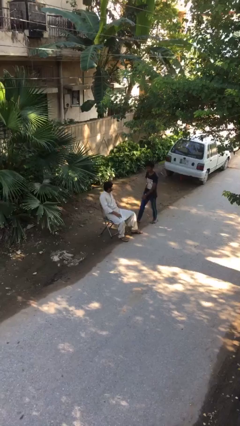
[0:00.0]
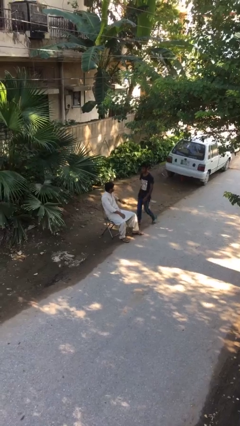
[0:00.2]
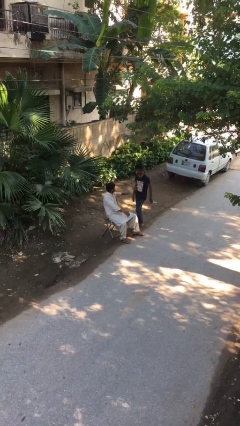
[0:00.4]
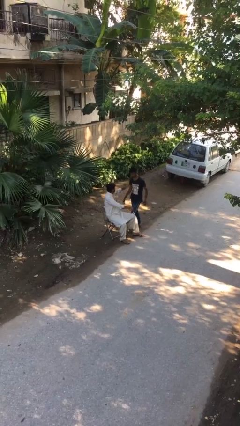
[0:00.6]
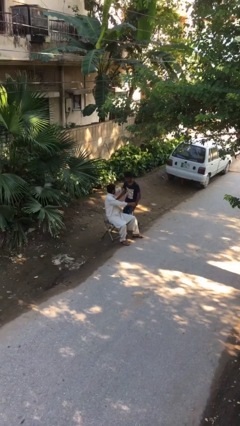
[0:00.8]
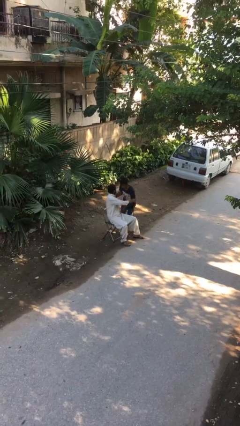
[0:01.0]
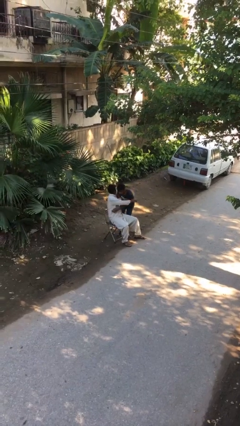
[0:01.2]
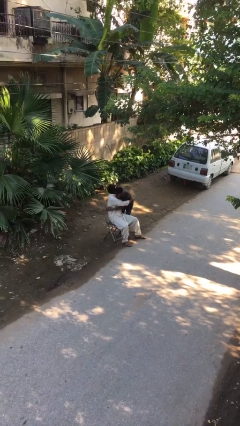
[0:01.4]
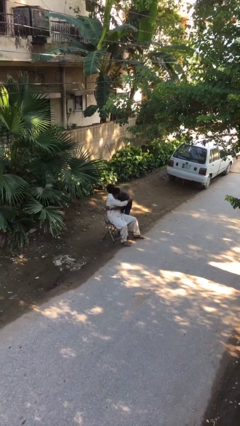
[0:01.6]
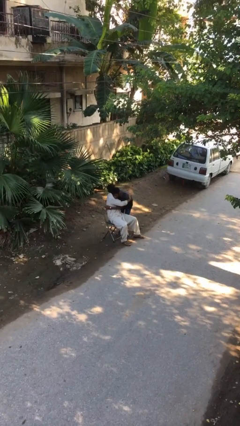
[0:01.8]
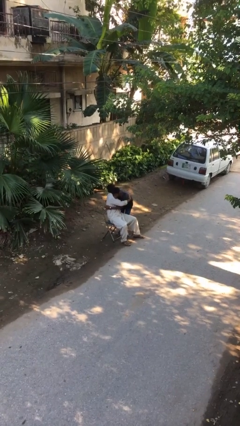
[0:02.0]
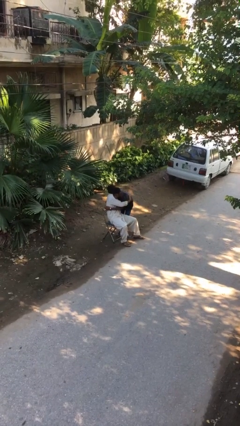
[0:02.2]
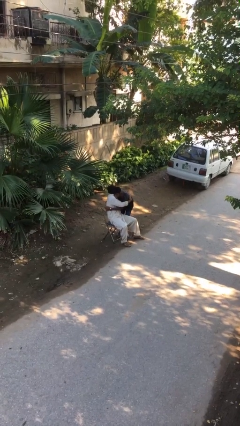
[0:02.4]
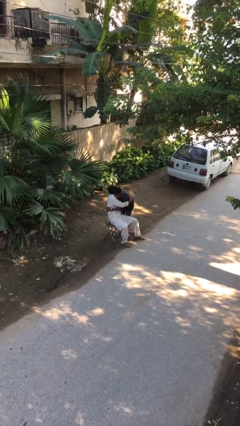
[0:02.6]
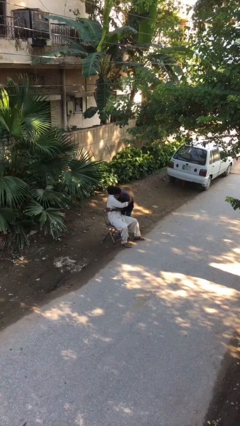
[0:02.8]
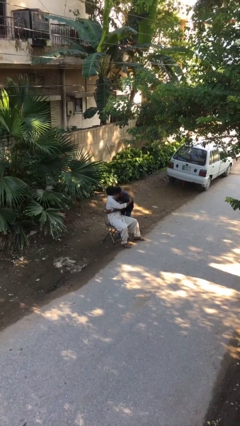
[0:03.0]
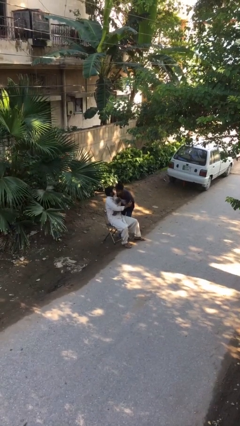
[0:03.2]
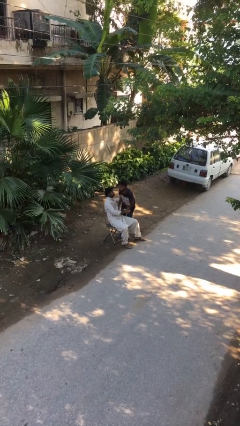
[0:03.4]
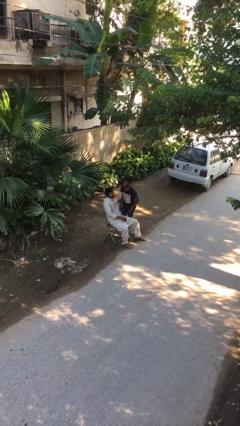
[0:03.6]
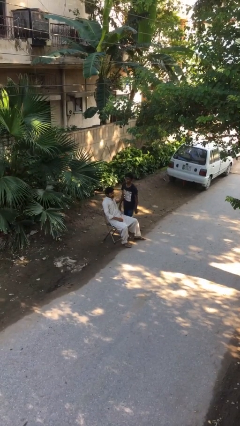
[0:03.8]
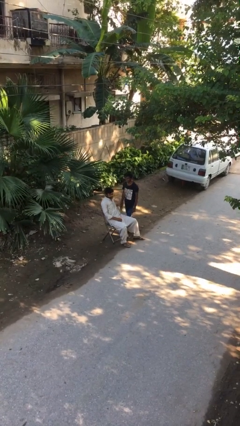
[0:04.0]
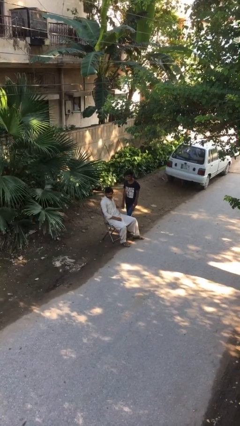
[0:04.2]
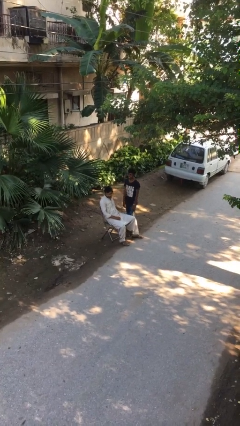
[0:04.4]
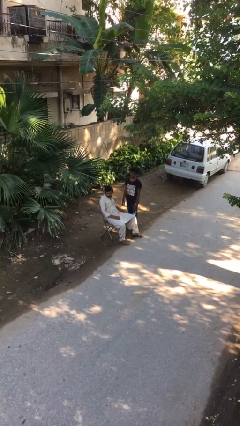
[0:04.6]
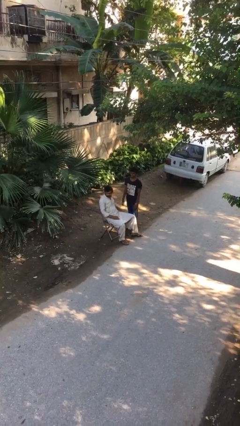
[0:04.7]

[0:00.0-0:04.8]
person embraces person

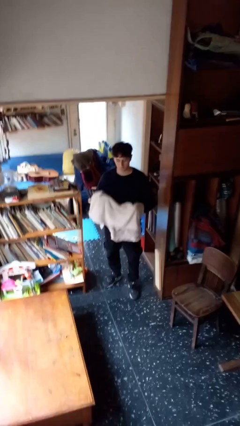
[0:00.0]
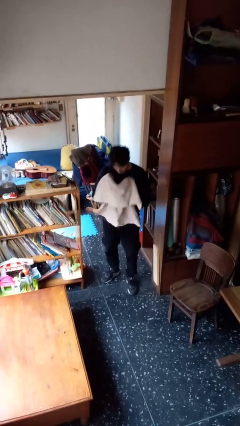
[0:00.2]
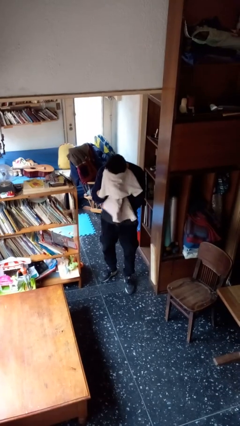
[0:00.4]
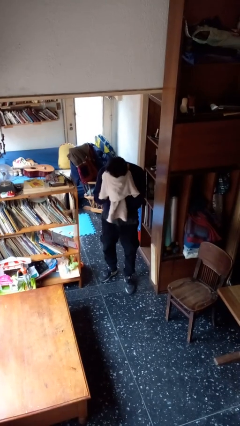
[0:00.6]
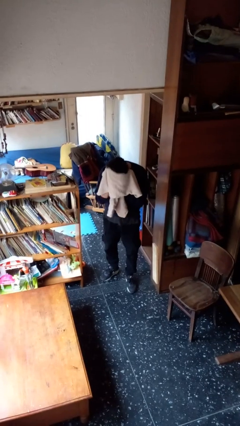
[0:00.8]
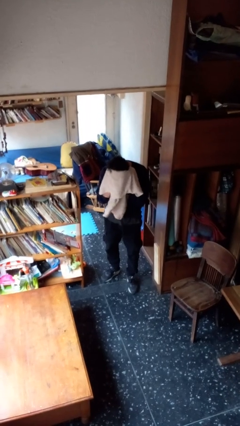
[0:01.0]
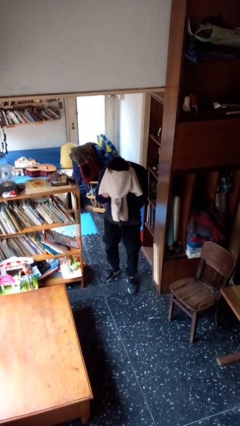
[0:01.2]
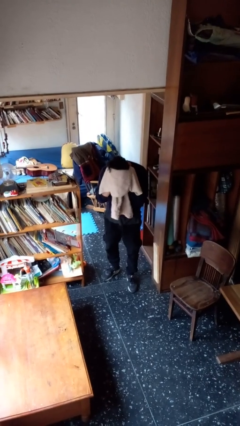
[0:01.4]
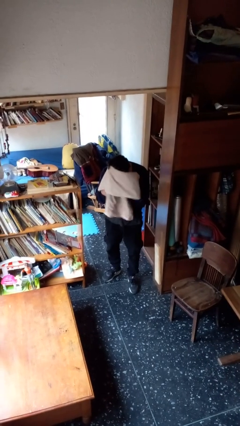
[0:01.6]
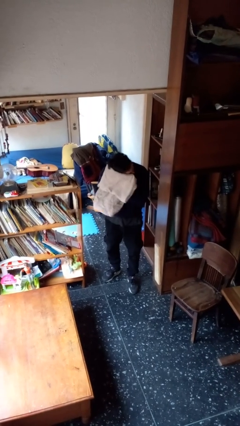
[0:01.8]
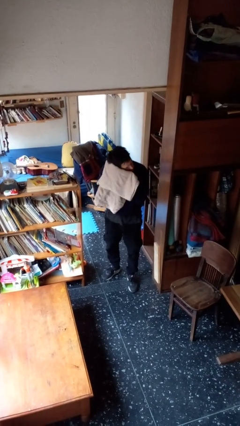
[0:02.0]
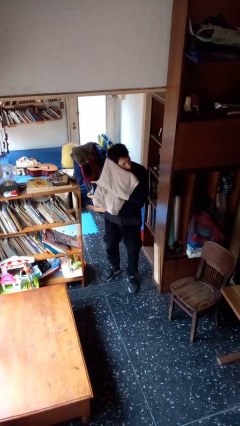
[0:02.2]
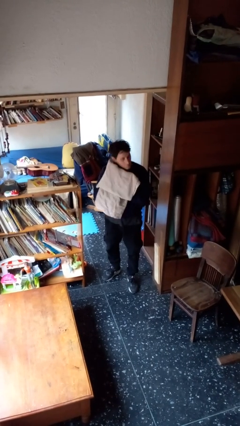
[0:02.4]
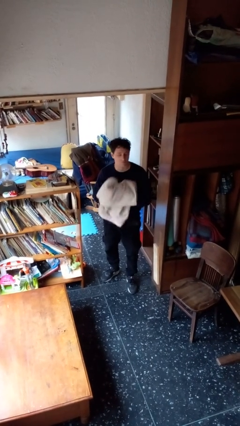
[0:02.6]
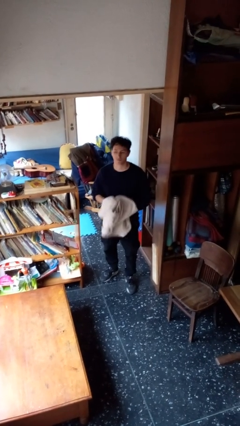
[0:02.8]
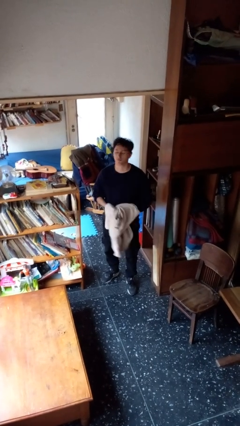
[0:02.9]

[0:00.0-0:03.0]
person dries hair with towel

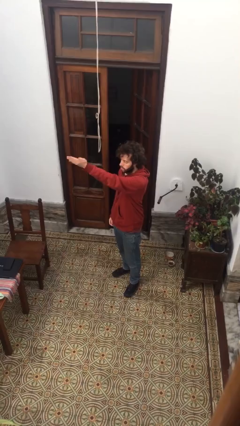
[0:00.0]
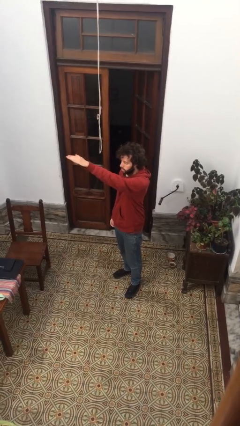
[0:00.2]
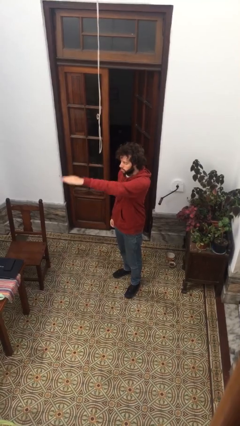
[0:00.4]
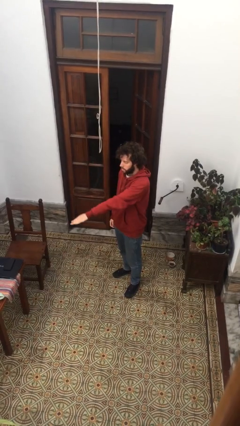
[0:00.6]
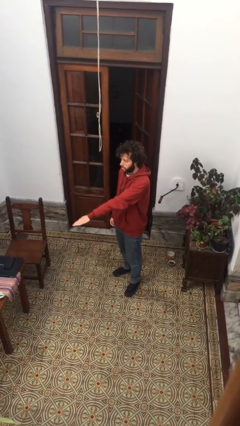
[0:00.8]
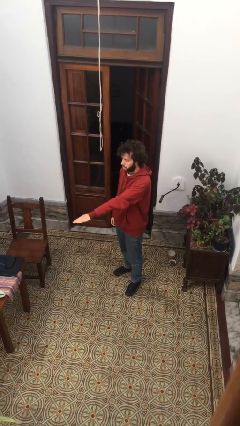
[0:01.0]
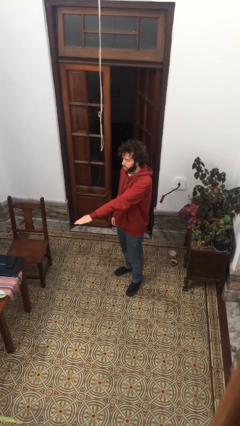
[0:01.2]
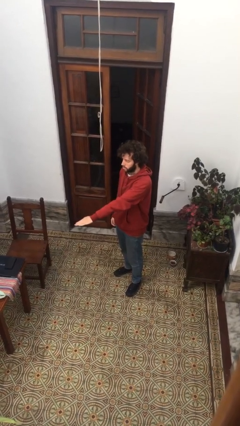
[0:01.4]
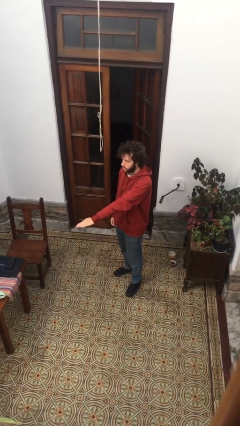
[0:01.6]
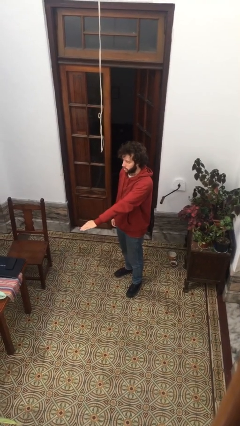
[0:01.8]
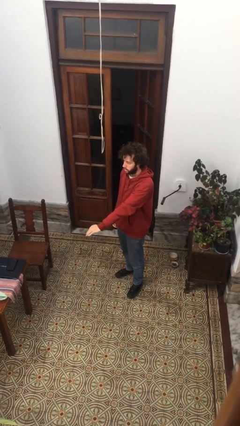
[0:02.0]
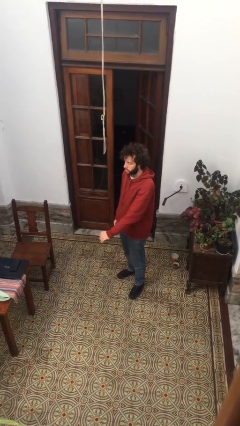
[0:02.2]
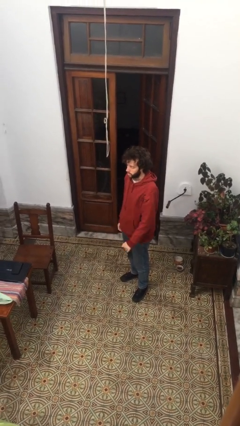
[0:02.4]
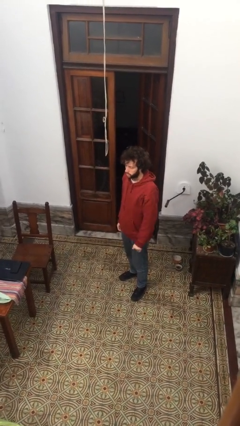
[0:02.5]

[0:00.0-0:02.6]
person gestures swipe down

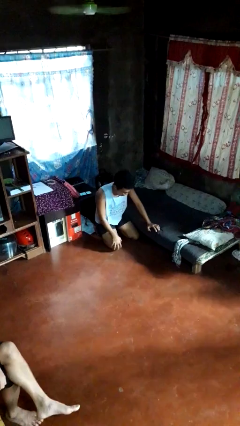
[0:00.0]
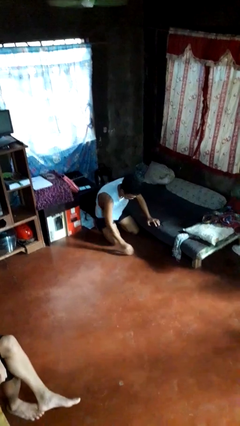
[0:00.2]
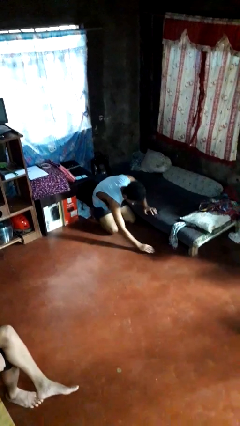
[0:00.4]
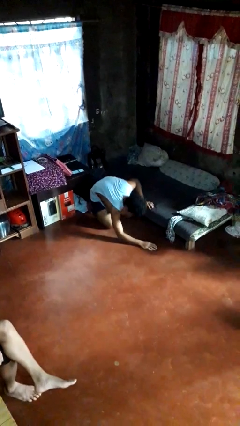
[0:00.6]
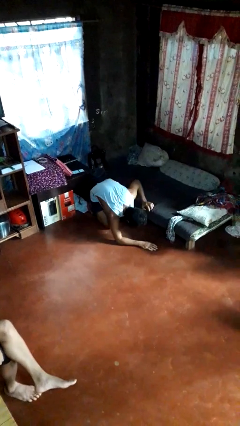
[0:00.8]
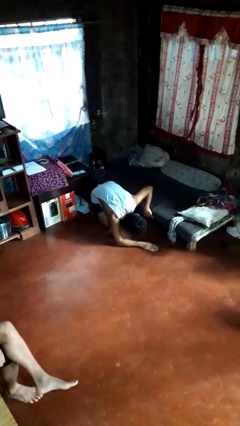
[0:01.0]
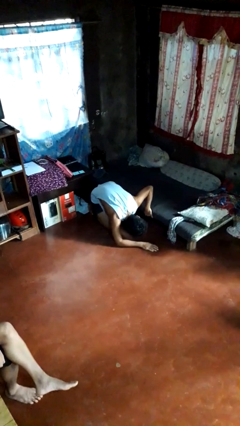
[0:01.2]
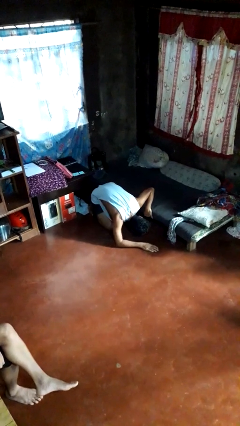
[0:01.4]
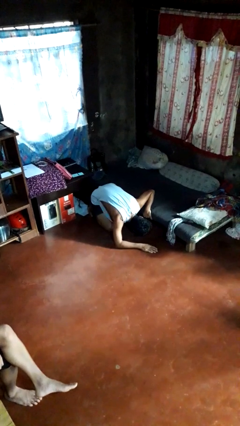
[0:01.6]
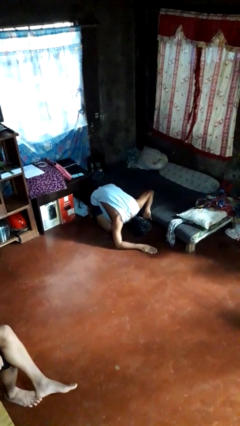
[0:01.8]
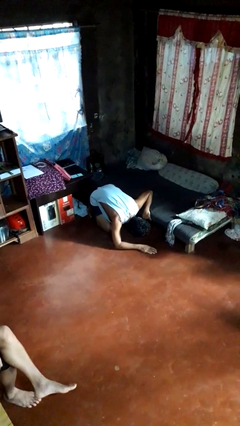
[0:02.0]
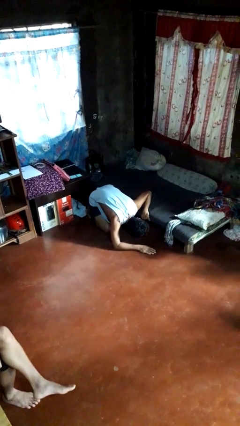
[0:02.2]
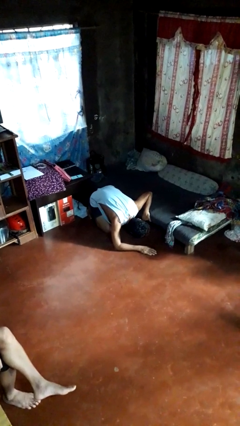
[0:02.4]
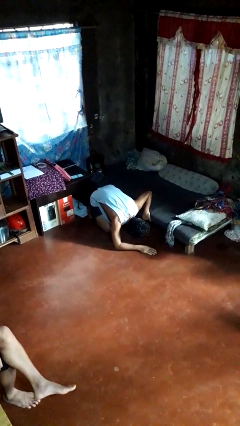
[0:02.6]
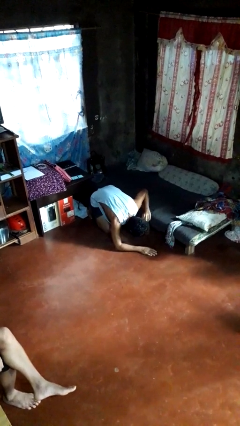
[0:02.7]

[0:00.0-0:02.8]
person searches under bed

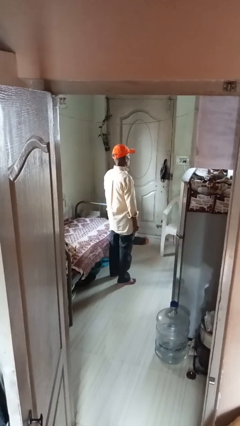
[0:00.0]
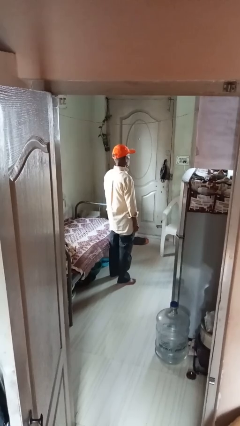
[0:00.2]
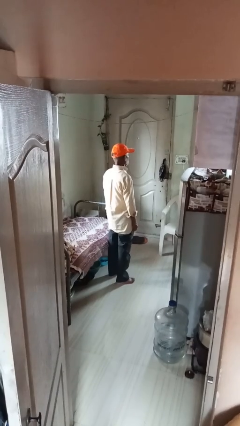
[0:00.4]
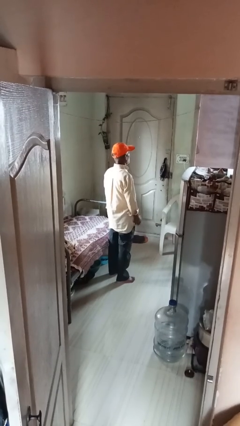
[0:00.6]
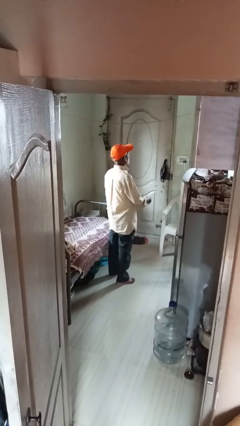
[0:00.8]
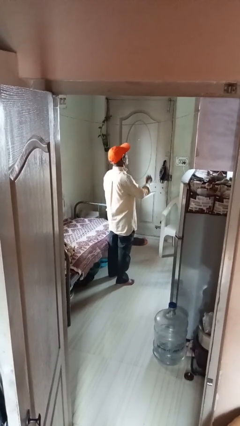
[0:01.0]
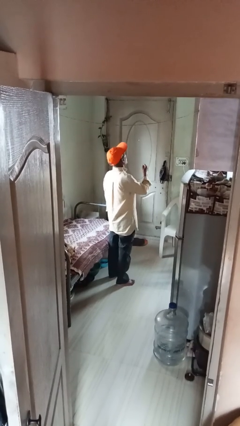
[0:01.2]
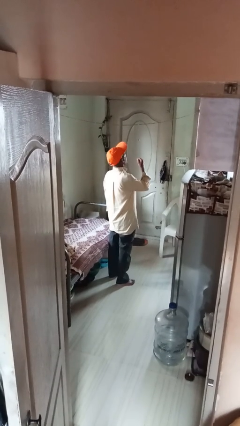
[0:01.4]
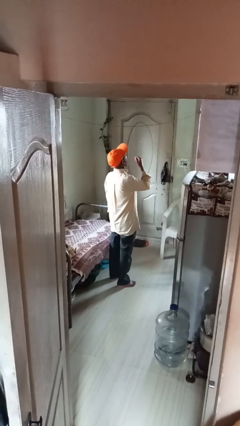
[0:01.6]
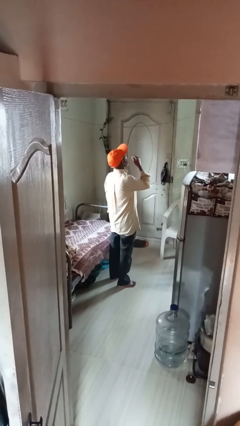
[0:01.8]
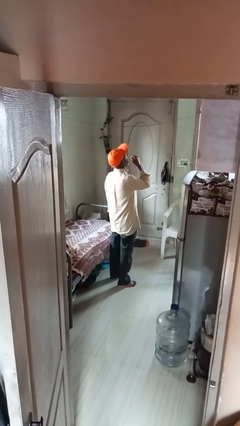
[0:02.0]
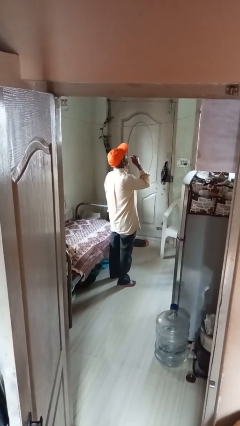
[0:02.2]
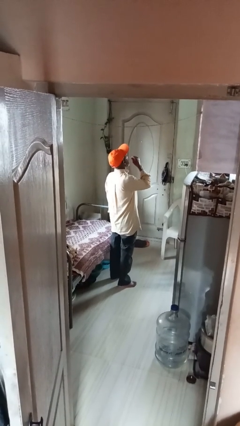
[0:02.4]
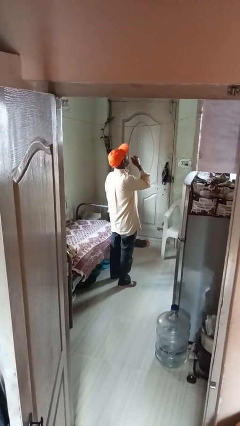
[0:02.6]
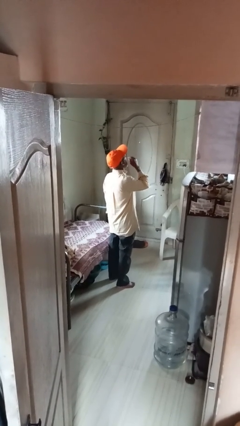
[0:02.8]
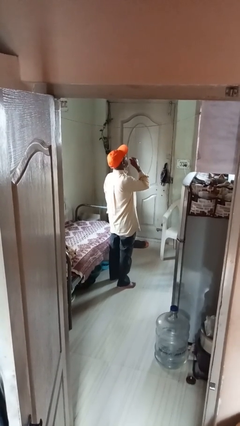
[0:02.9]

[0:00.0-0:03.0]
person yawns

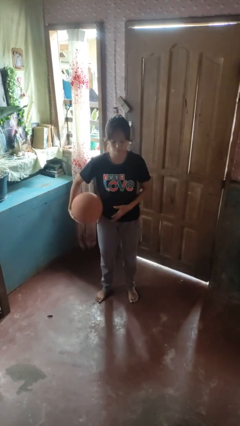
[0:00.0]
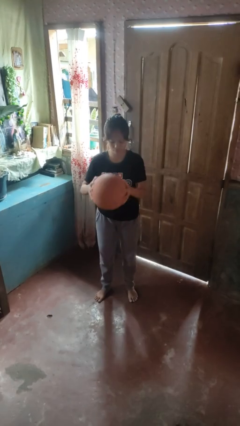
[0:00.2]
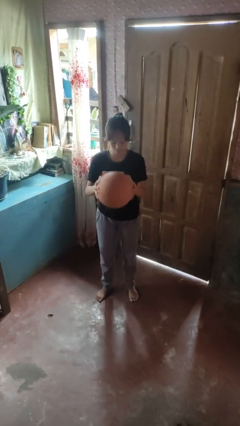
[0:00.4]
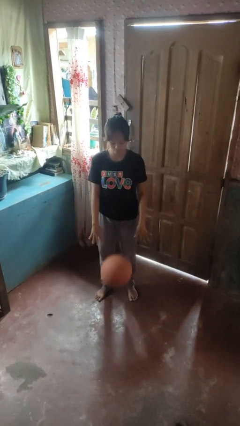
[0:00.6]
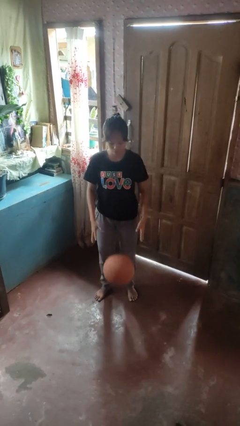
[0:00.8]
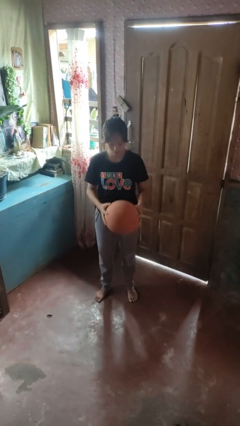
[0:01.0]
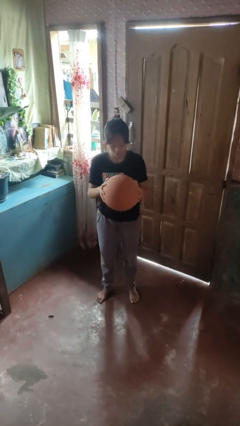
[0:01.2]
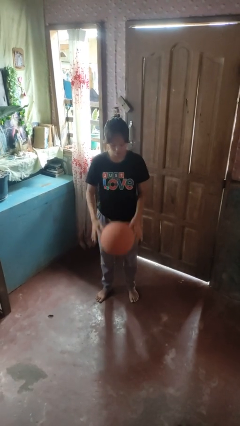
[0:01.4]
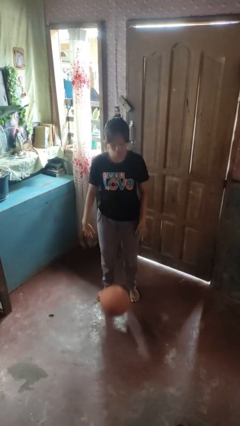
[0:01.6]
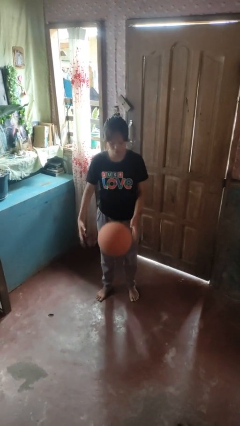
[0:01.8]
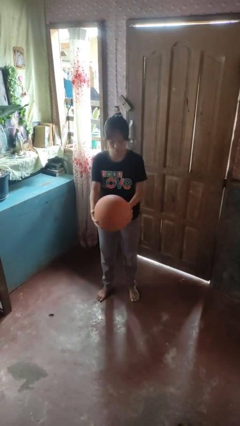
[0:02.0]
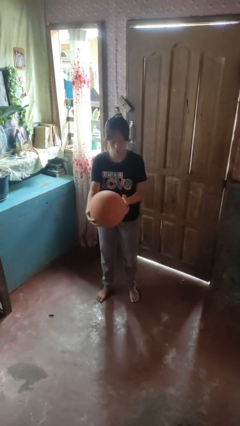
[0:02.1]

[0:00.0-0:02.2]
person bounces ball on floor
